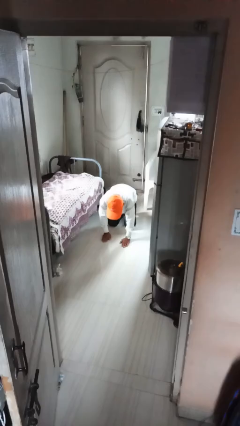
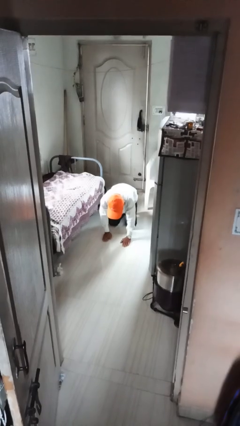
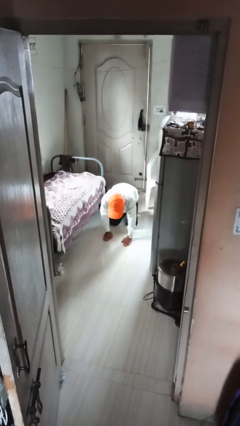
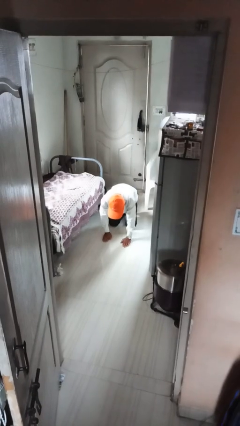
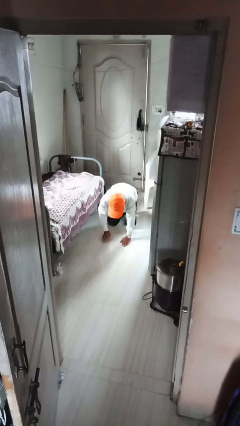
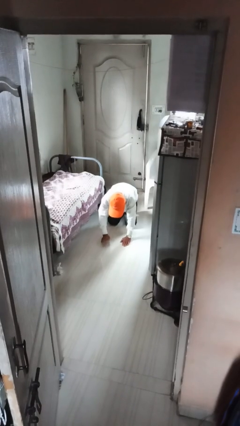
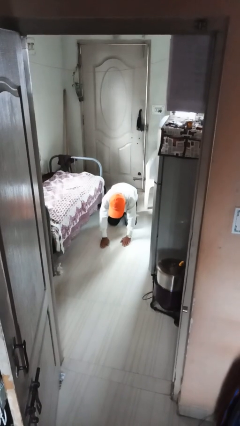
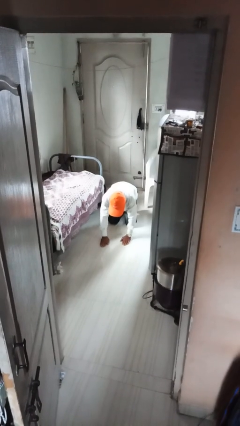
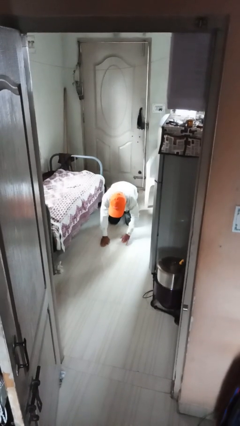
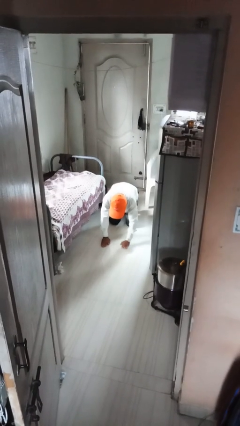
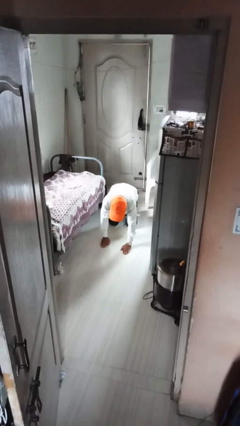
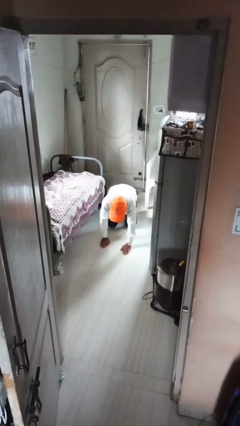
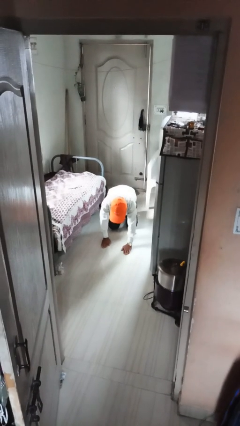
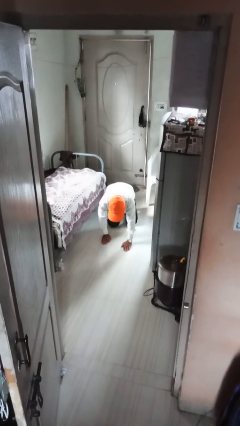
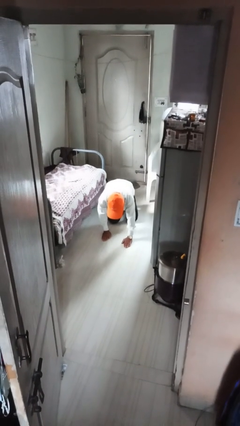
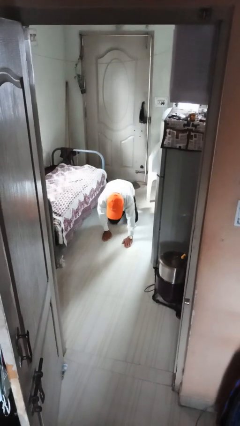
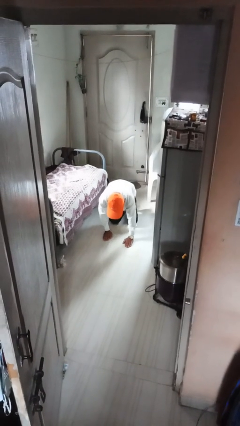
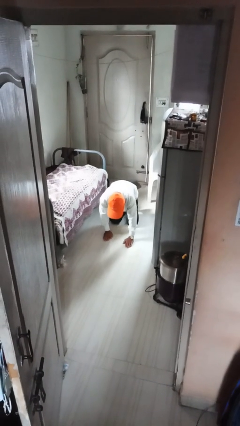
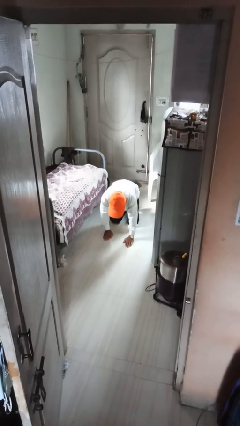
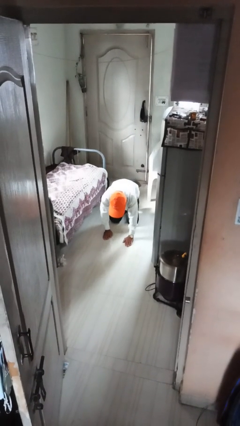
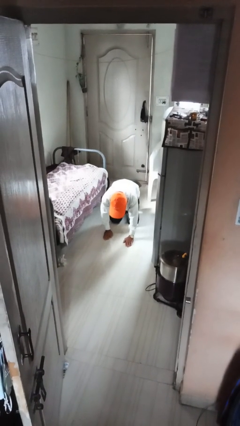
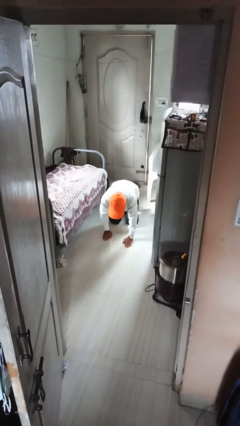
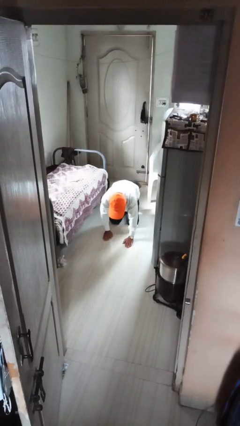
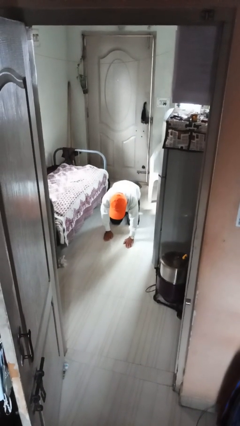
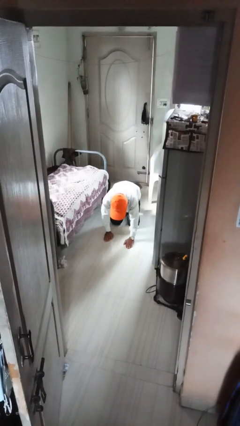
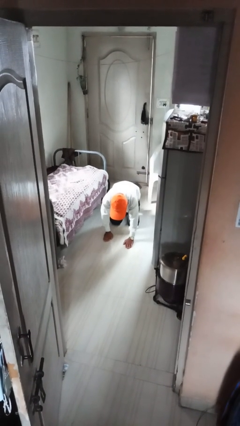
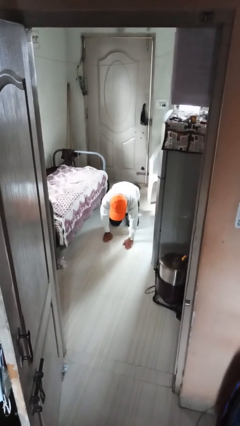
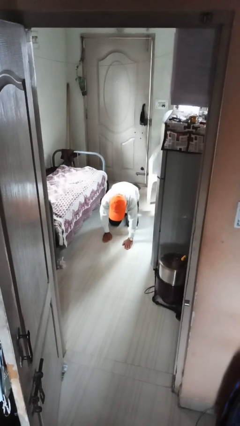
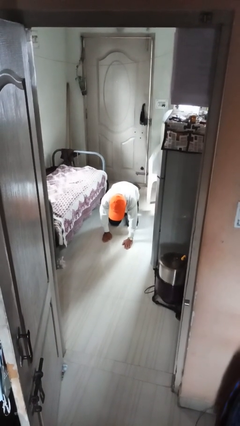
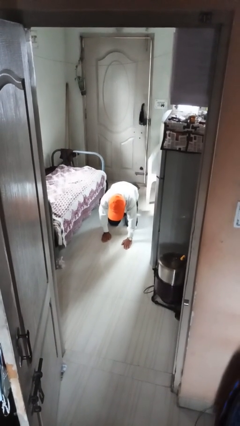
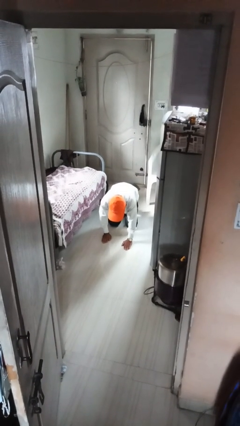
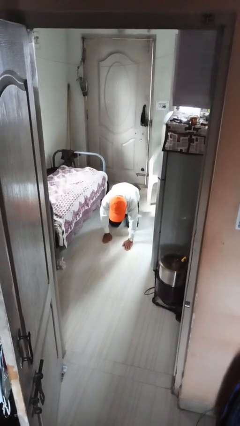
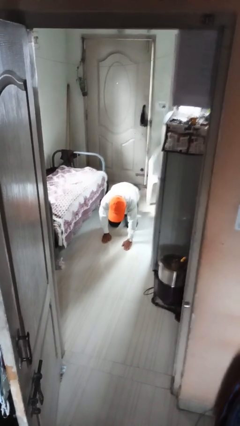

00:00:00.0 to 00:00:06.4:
person crawls

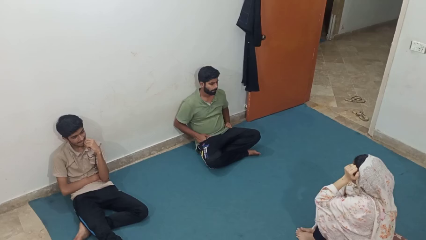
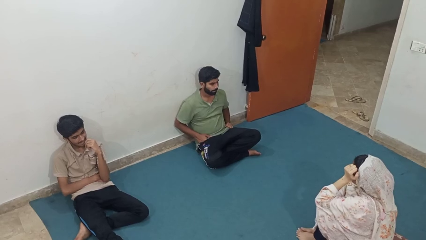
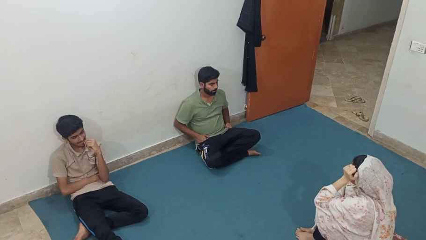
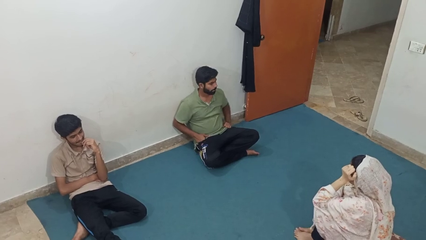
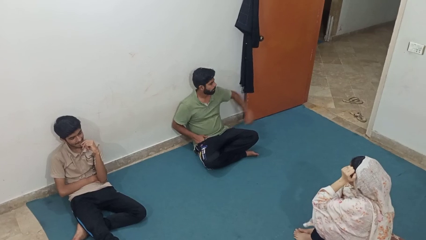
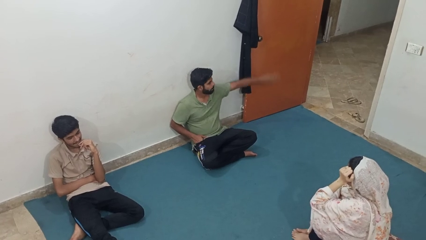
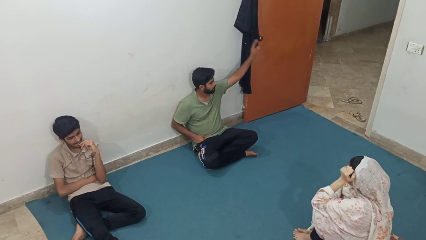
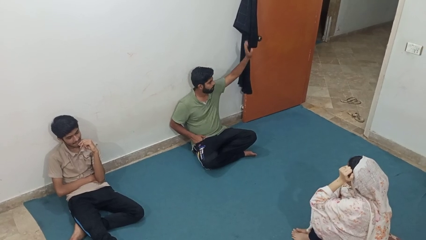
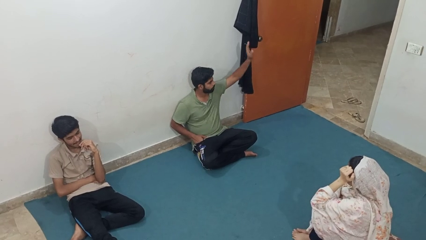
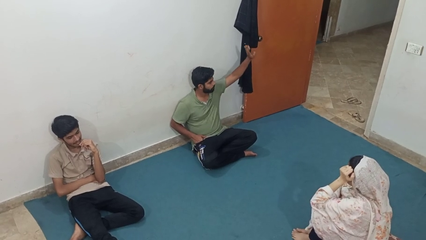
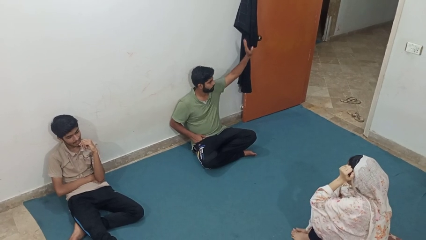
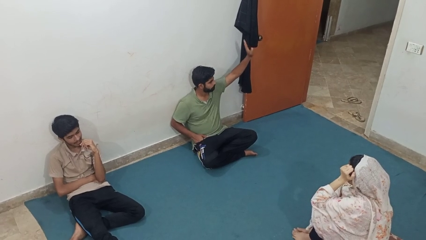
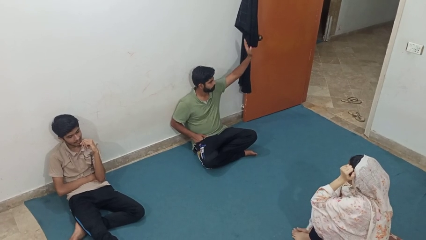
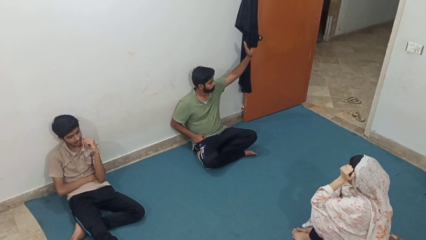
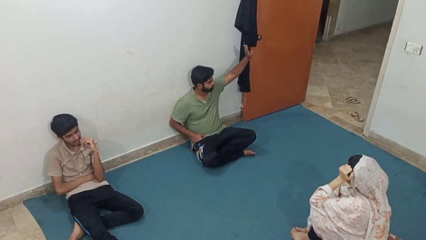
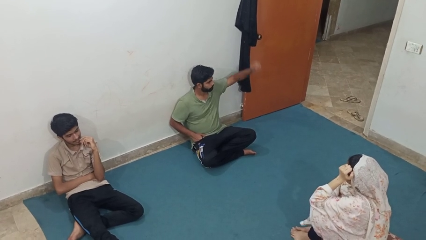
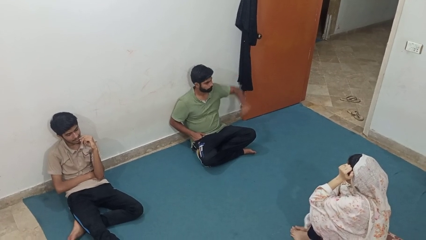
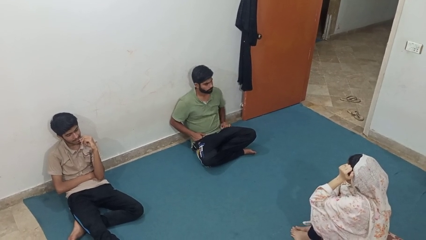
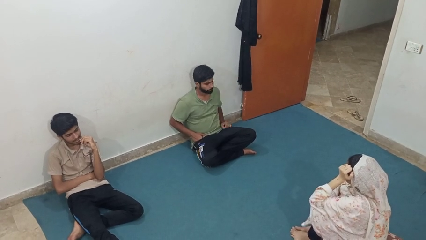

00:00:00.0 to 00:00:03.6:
person waves at person

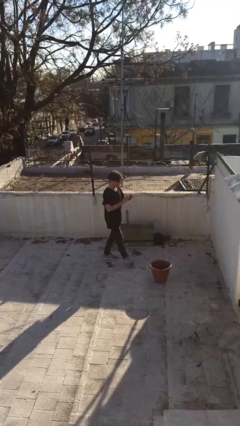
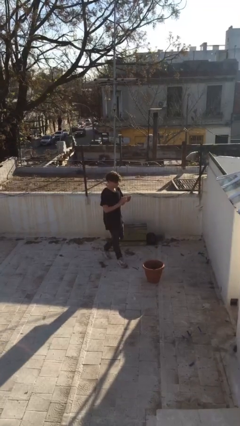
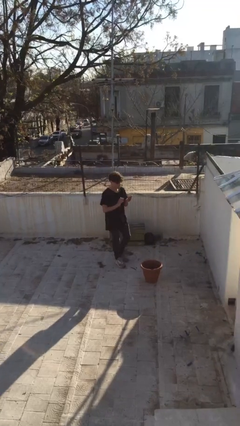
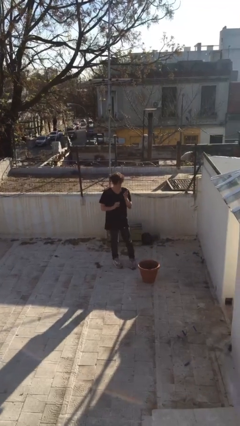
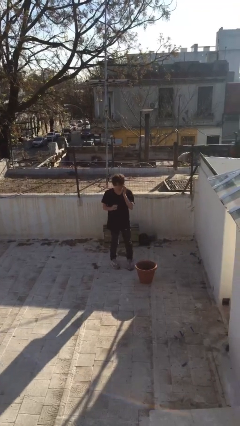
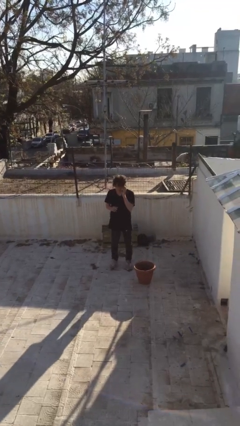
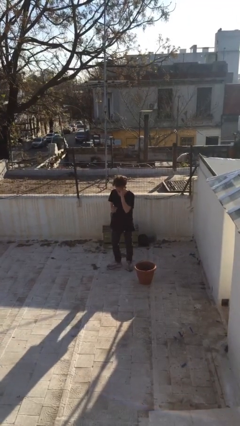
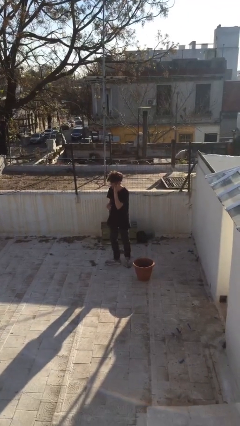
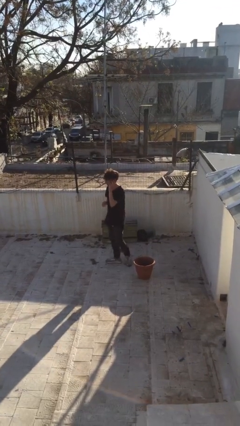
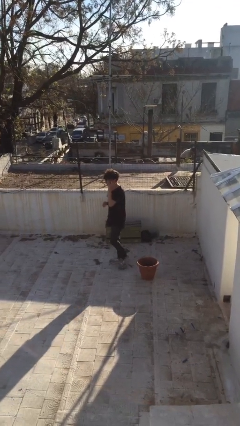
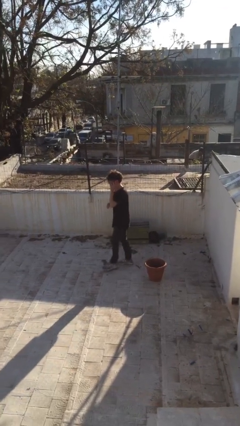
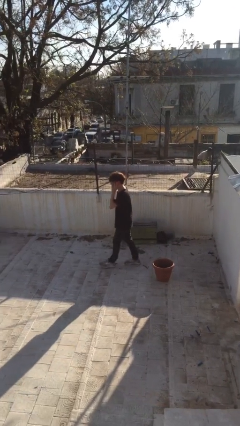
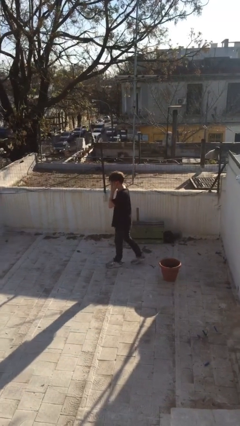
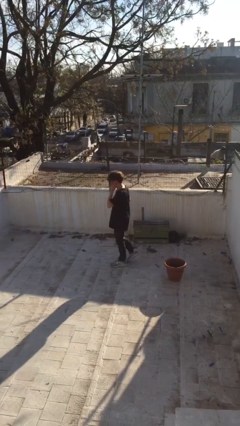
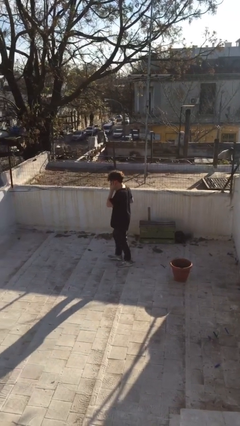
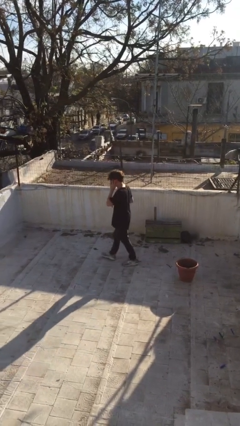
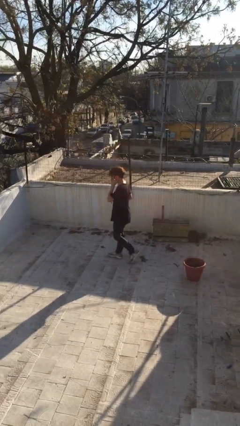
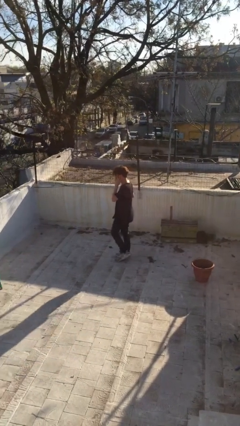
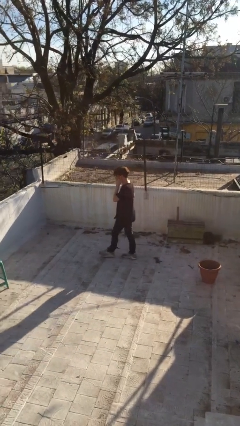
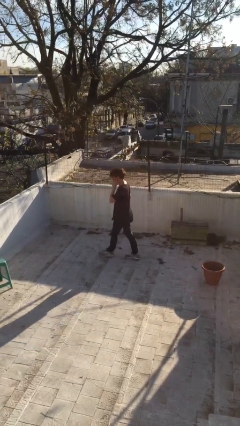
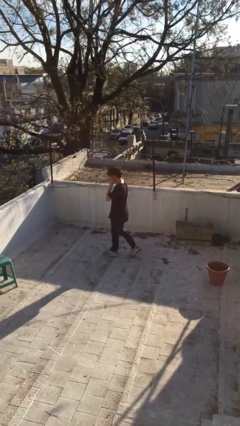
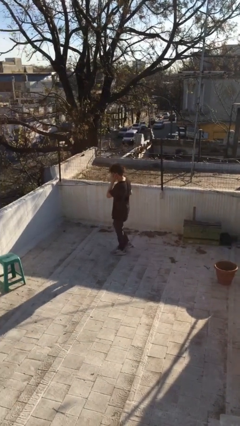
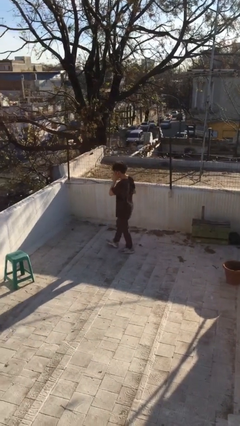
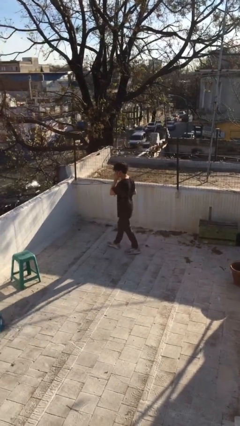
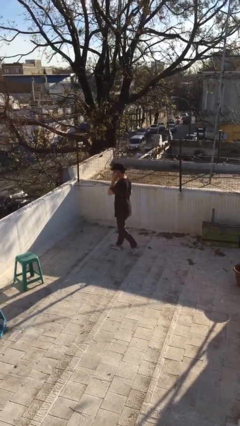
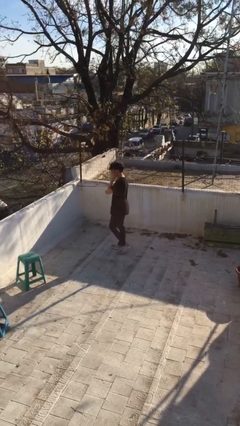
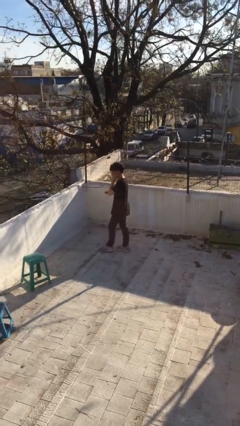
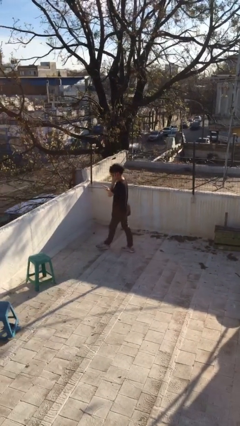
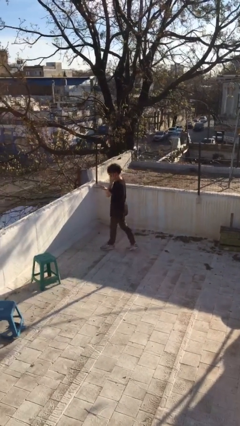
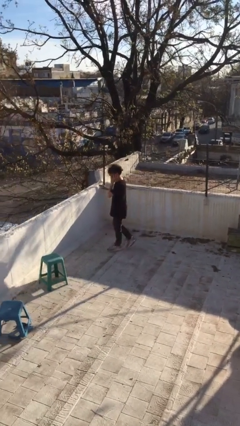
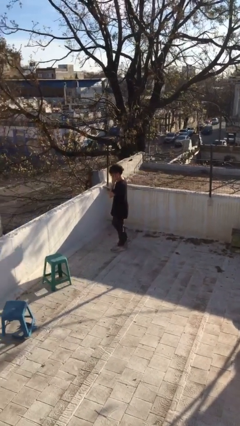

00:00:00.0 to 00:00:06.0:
person talks on phone

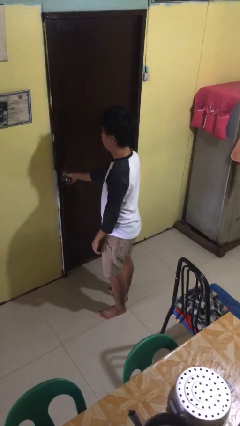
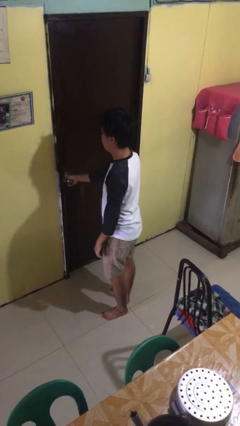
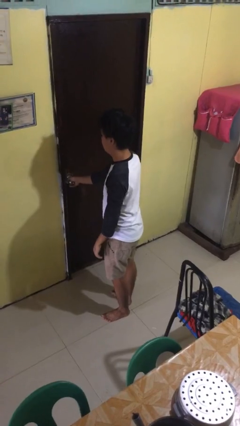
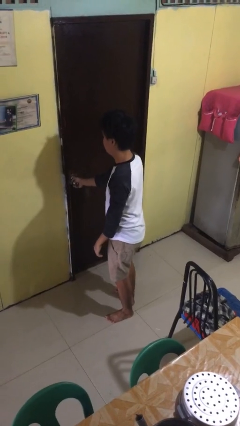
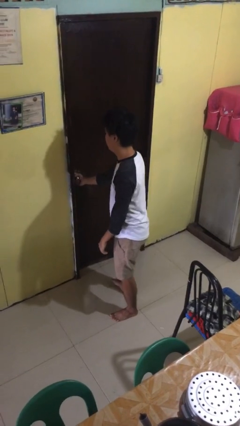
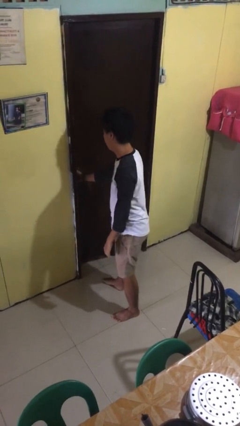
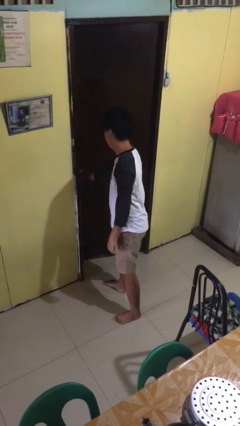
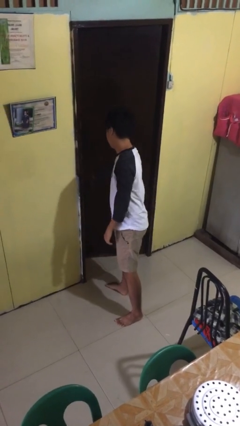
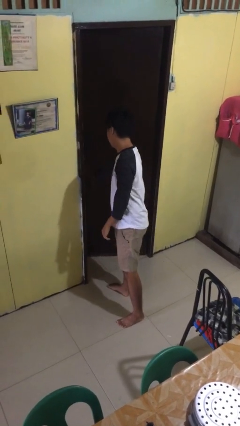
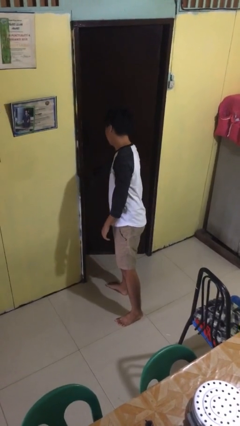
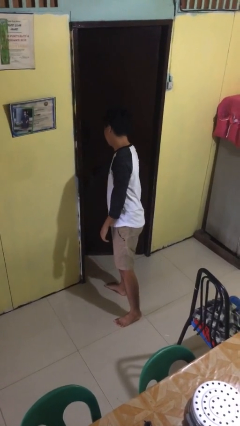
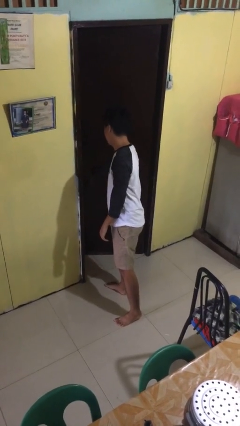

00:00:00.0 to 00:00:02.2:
person opens facility door
